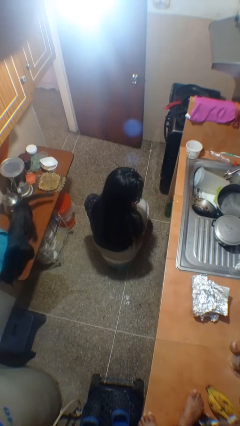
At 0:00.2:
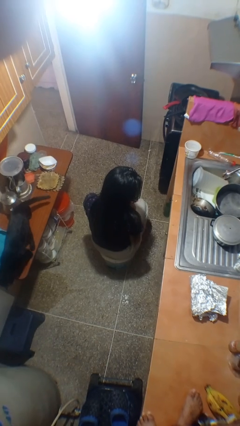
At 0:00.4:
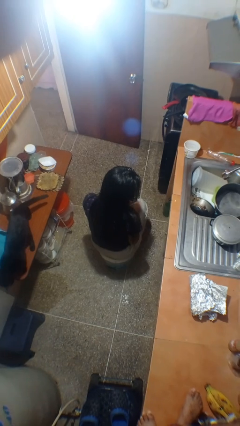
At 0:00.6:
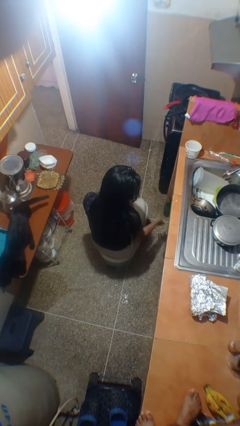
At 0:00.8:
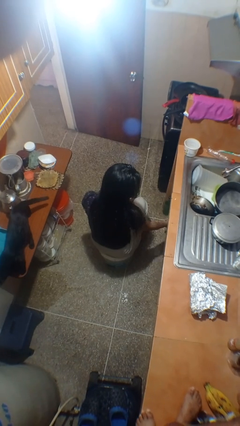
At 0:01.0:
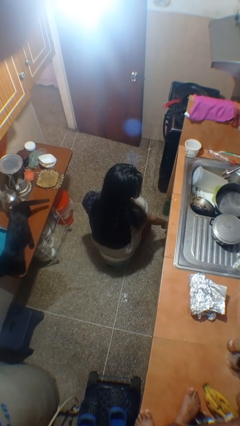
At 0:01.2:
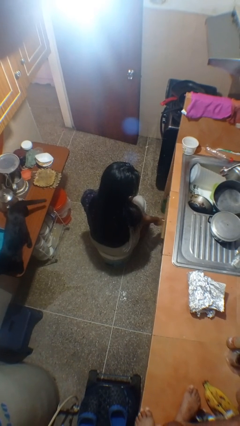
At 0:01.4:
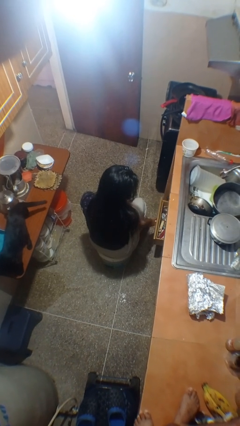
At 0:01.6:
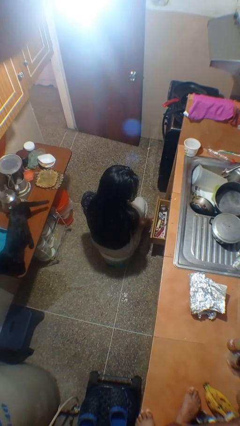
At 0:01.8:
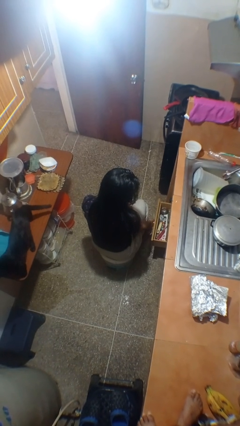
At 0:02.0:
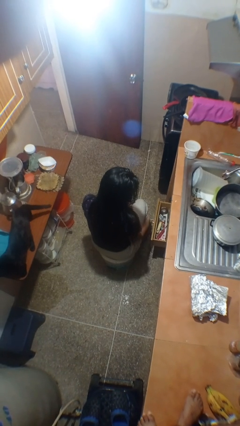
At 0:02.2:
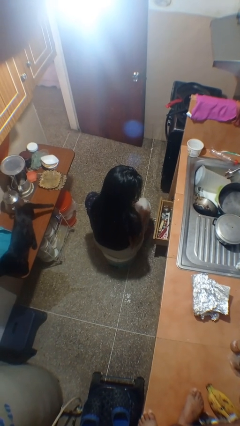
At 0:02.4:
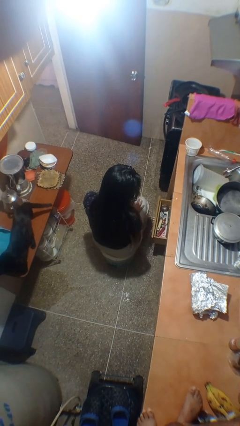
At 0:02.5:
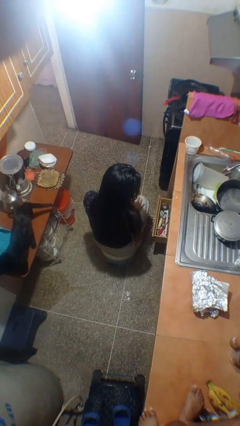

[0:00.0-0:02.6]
person opens kitchen drawer

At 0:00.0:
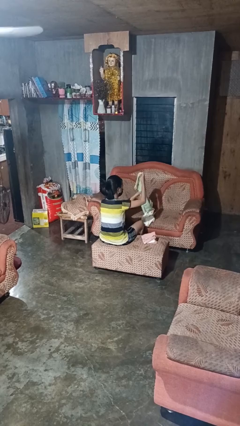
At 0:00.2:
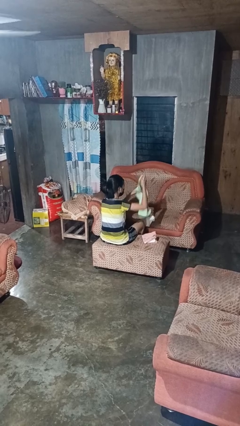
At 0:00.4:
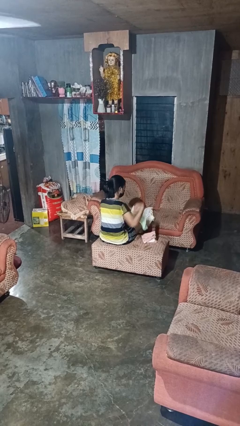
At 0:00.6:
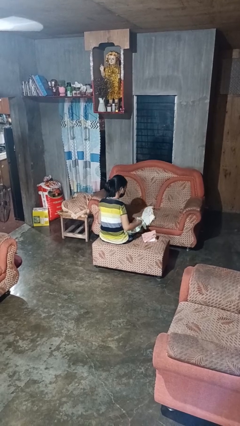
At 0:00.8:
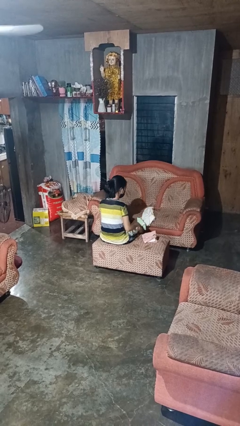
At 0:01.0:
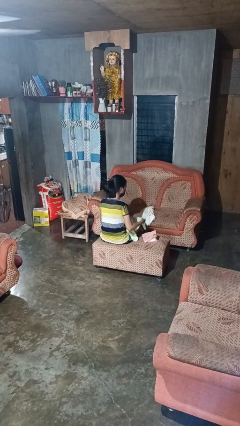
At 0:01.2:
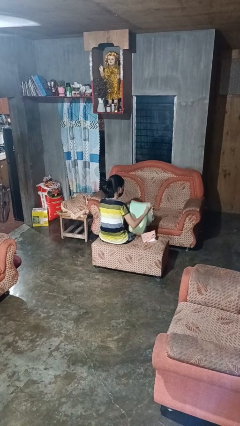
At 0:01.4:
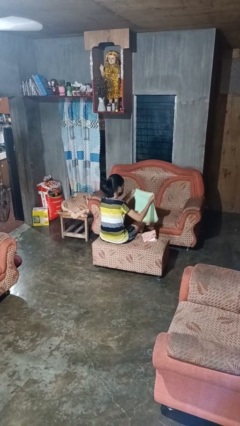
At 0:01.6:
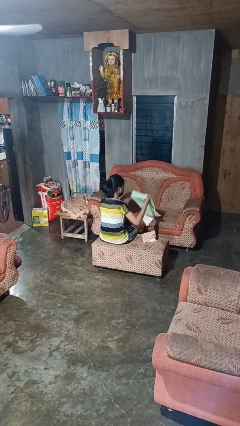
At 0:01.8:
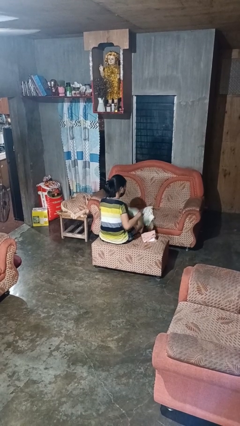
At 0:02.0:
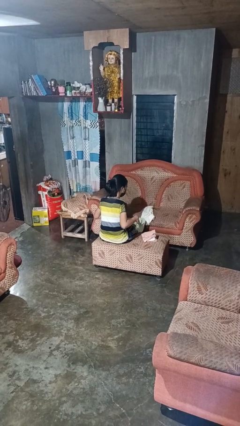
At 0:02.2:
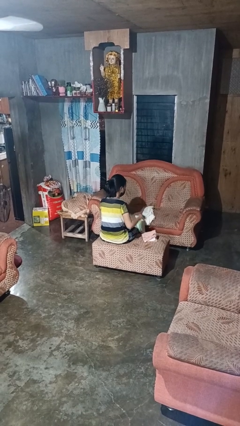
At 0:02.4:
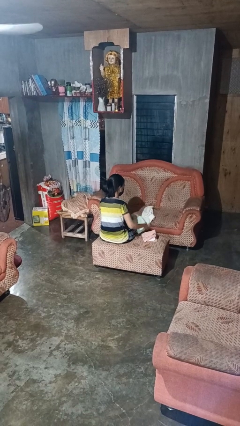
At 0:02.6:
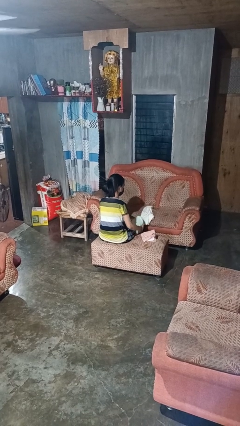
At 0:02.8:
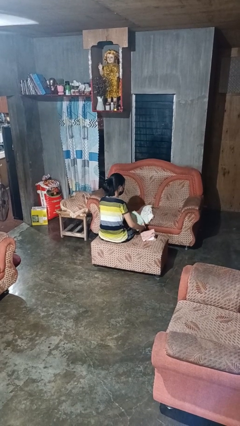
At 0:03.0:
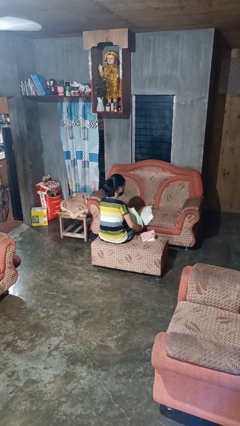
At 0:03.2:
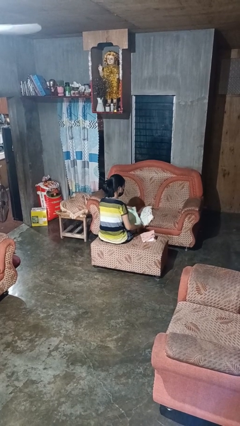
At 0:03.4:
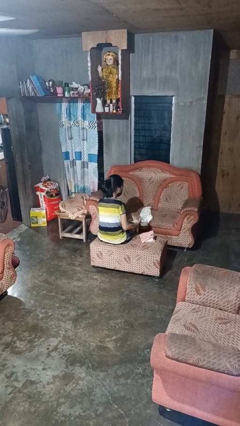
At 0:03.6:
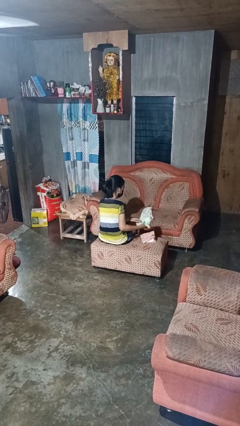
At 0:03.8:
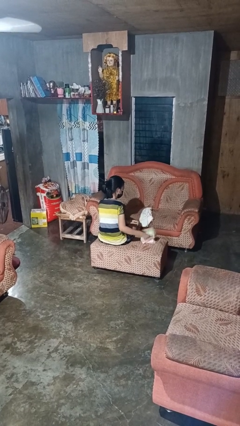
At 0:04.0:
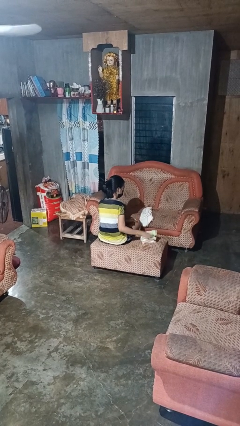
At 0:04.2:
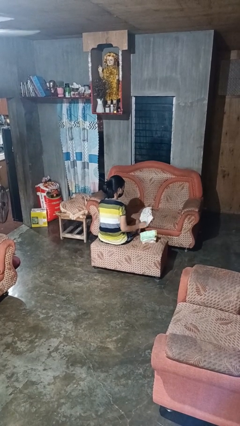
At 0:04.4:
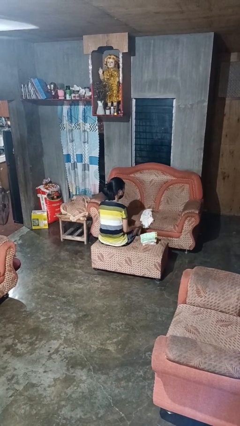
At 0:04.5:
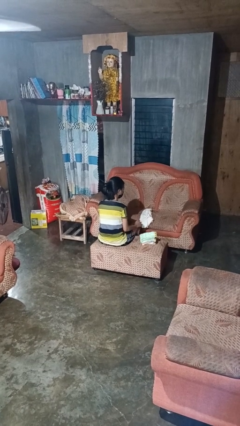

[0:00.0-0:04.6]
person folds towel

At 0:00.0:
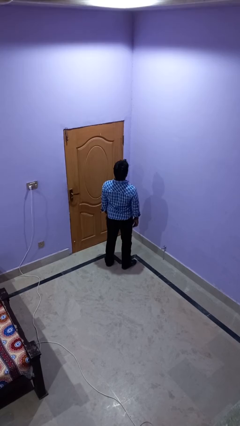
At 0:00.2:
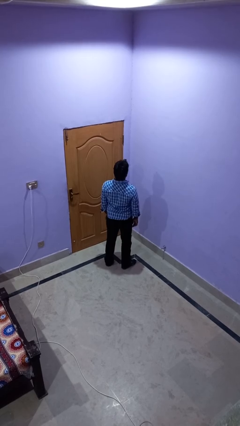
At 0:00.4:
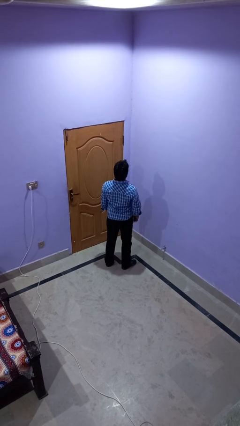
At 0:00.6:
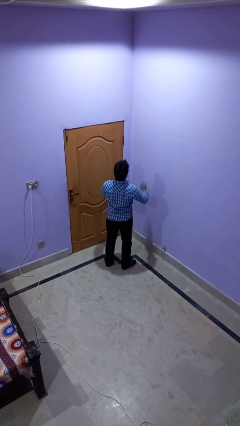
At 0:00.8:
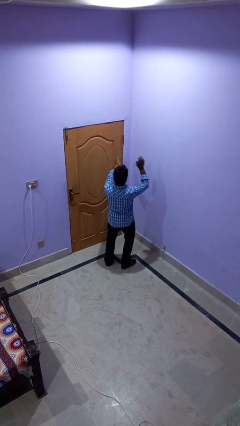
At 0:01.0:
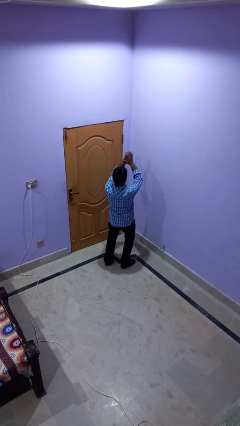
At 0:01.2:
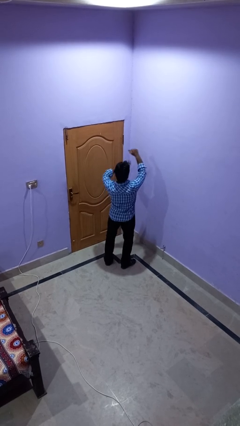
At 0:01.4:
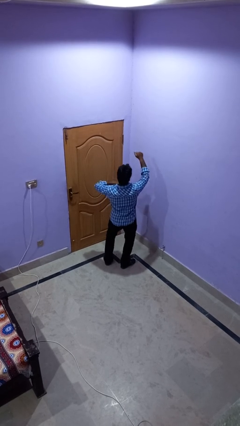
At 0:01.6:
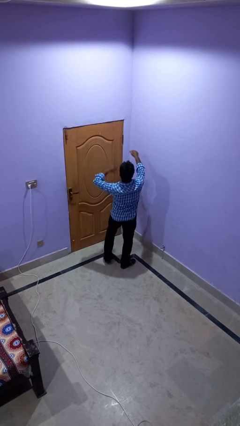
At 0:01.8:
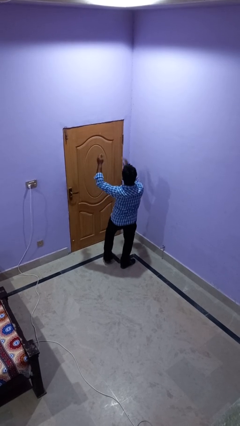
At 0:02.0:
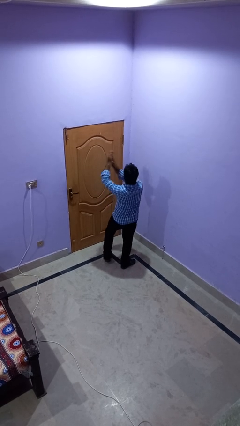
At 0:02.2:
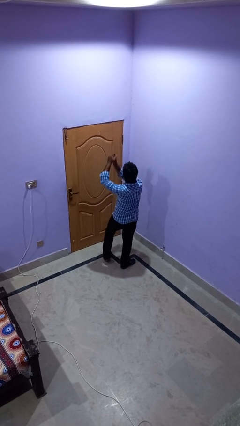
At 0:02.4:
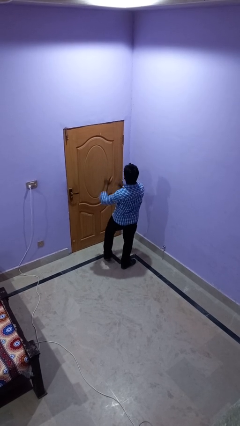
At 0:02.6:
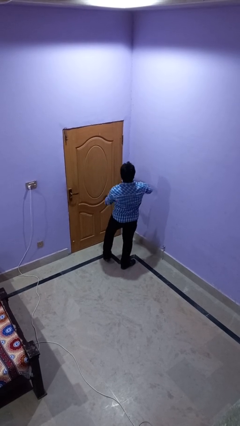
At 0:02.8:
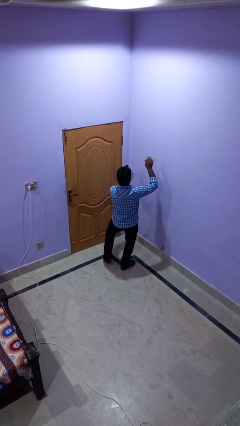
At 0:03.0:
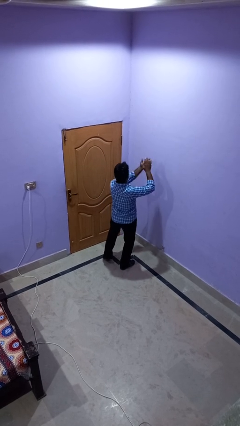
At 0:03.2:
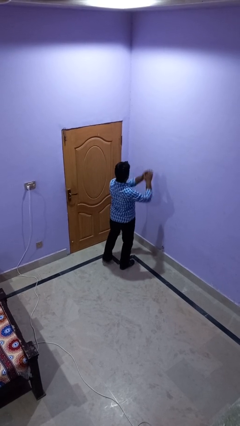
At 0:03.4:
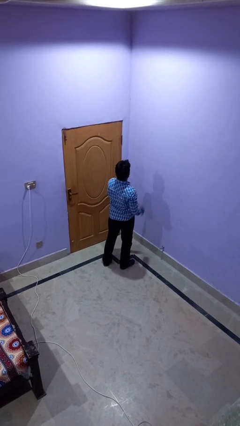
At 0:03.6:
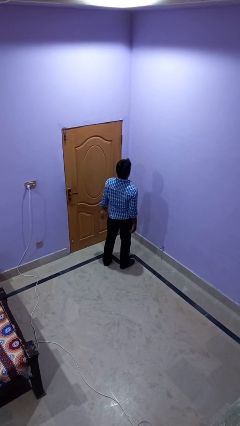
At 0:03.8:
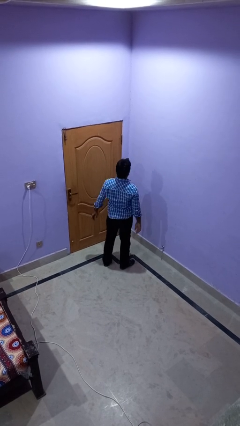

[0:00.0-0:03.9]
person dances in place

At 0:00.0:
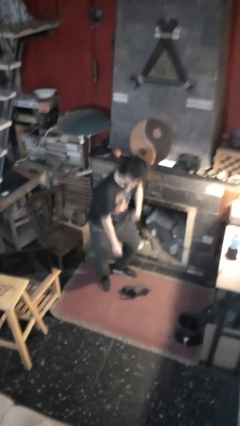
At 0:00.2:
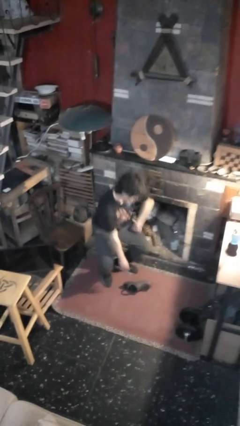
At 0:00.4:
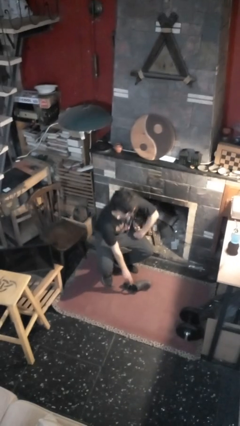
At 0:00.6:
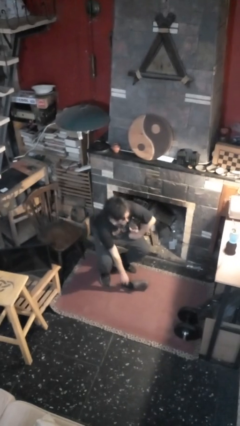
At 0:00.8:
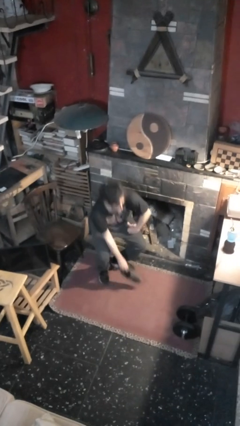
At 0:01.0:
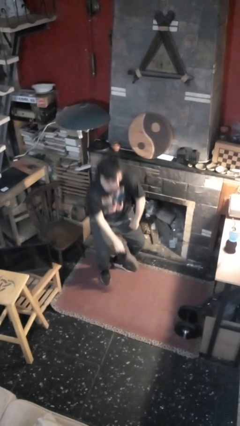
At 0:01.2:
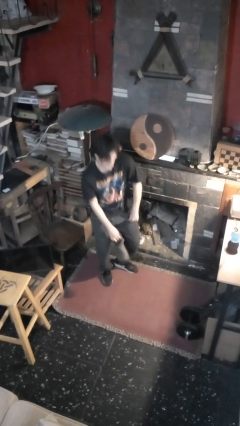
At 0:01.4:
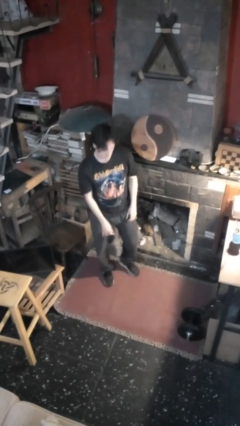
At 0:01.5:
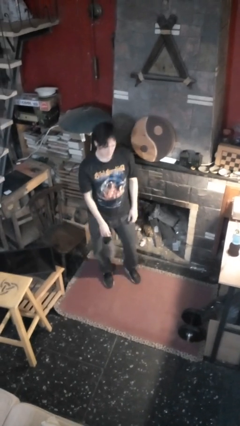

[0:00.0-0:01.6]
person picks up object from floor

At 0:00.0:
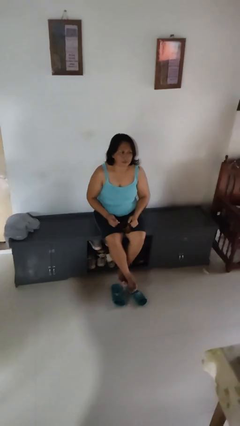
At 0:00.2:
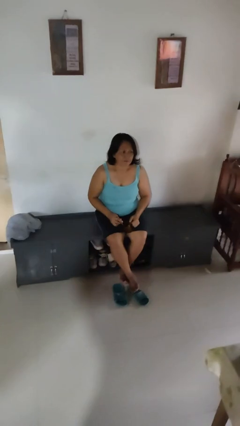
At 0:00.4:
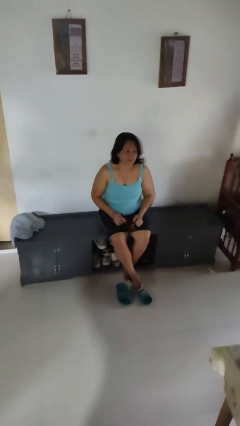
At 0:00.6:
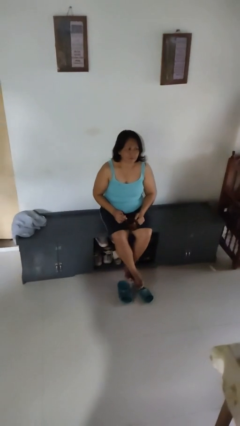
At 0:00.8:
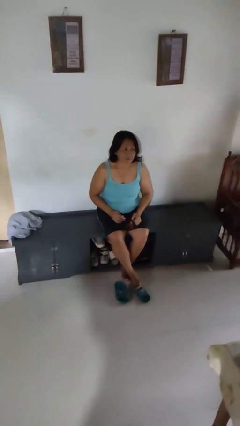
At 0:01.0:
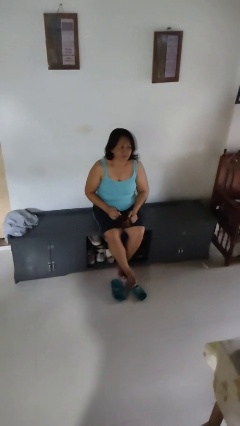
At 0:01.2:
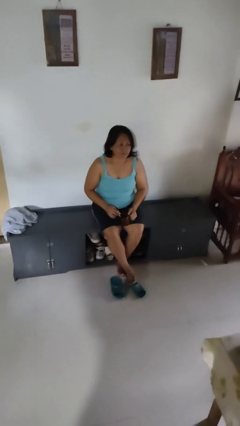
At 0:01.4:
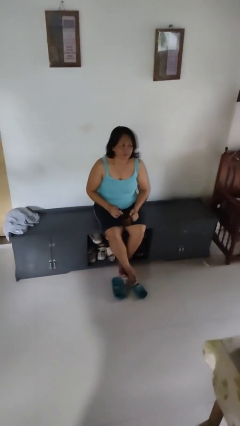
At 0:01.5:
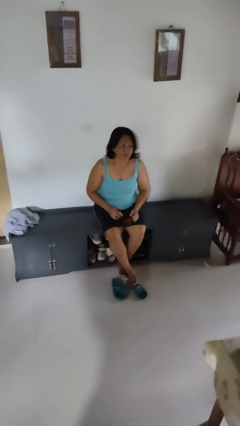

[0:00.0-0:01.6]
person stirs mug

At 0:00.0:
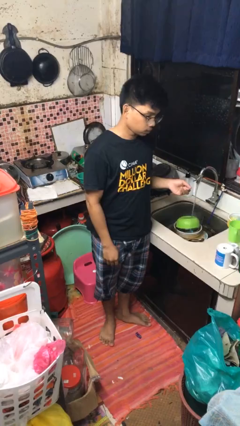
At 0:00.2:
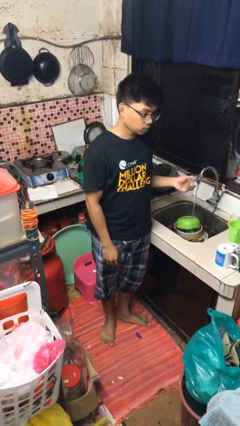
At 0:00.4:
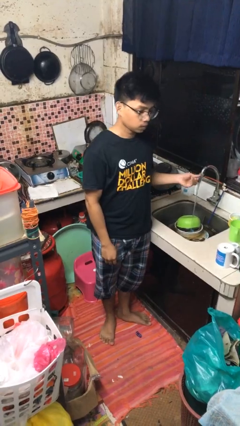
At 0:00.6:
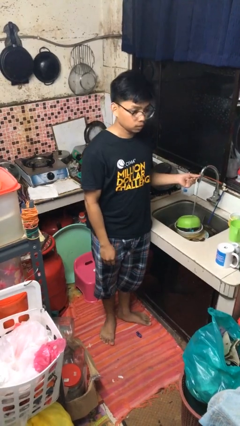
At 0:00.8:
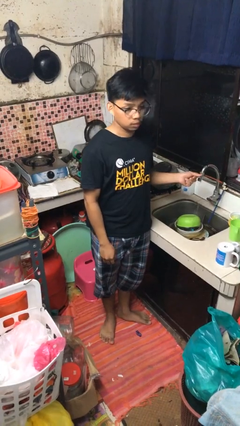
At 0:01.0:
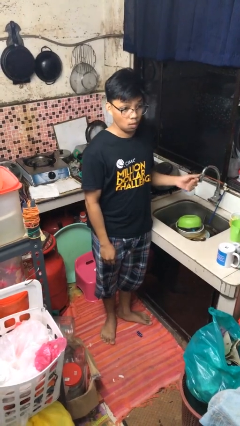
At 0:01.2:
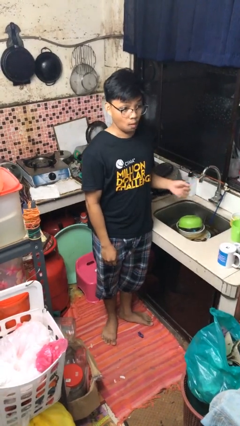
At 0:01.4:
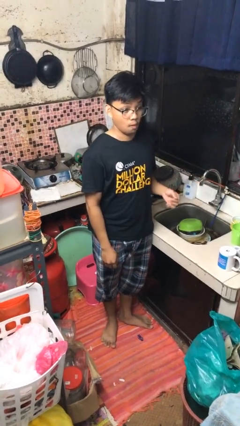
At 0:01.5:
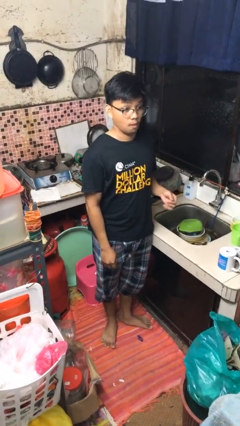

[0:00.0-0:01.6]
person turns off faucet

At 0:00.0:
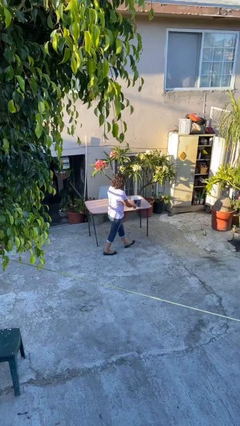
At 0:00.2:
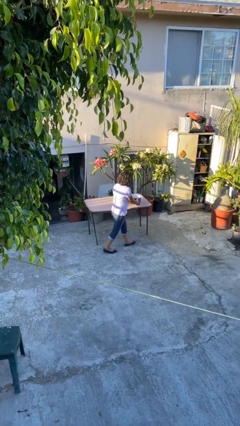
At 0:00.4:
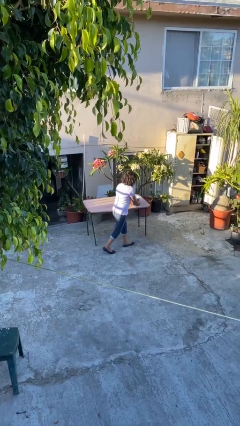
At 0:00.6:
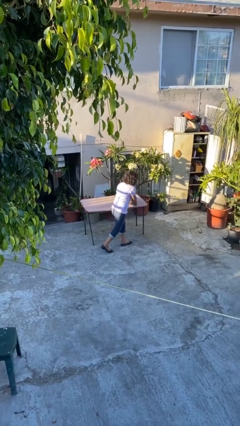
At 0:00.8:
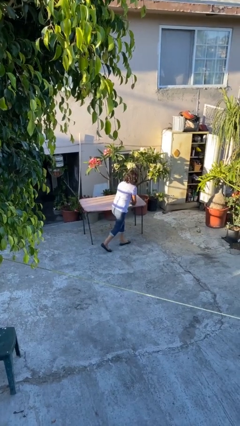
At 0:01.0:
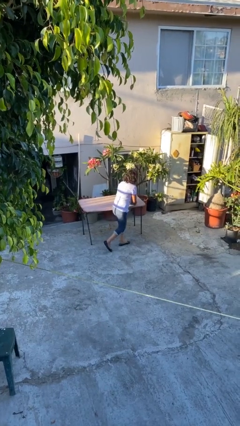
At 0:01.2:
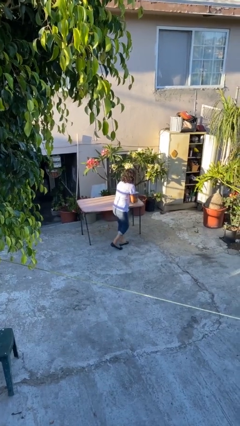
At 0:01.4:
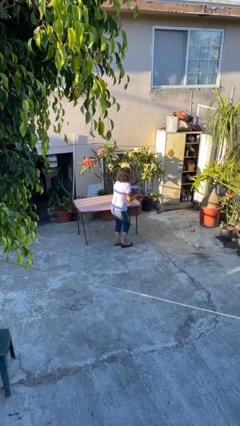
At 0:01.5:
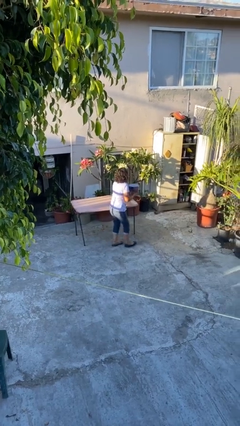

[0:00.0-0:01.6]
person picks up object from table
